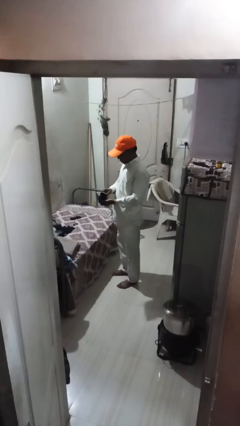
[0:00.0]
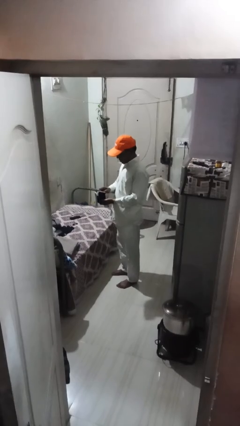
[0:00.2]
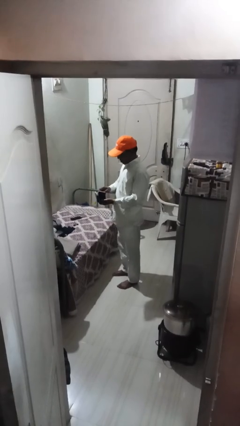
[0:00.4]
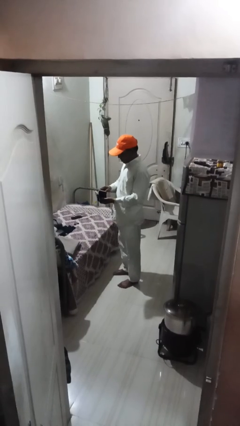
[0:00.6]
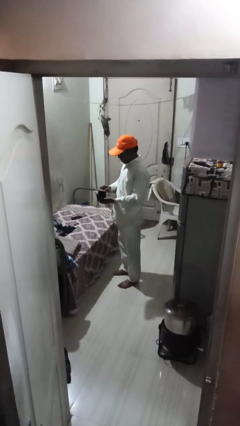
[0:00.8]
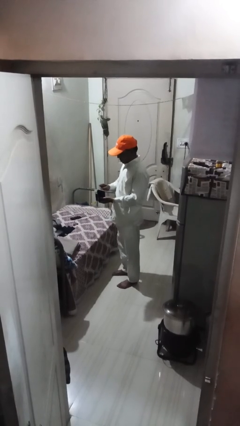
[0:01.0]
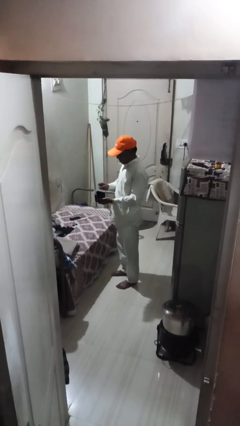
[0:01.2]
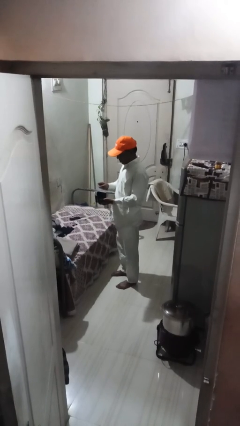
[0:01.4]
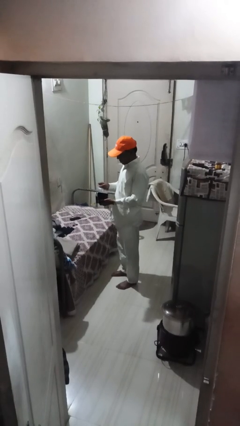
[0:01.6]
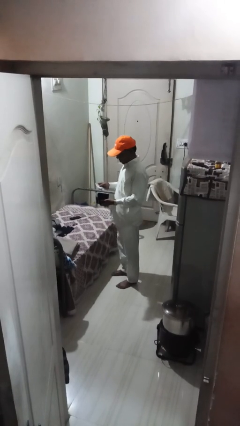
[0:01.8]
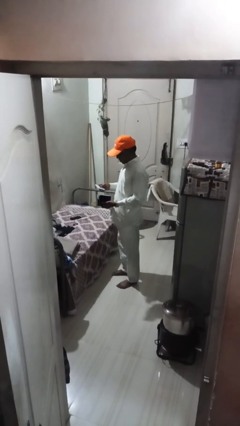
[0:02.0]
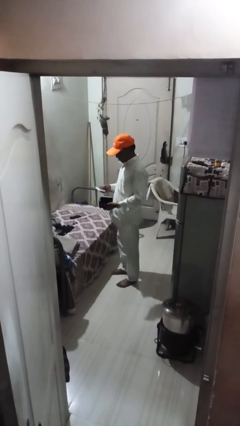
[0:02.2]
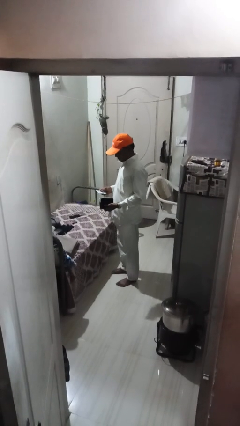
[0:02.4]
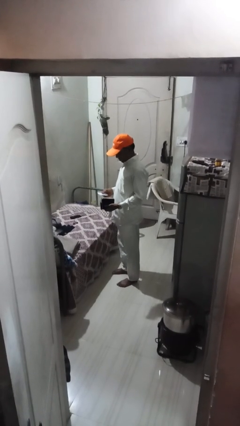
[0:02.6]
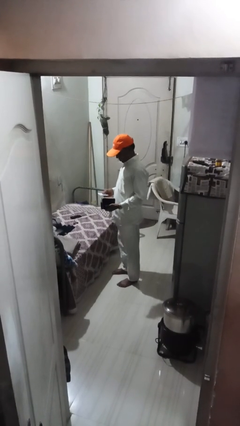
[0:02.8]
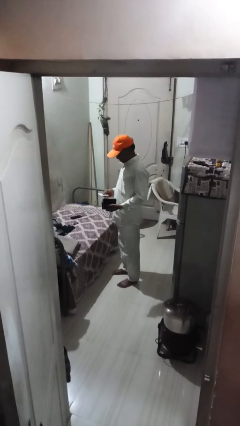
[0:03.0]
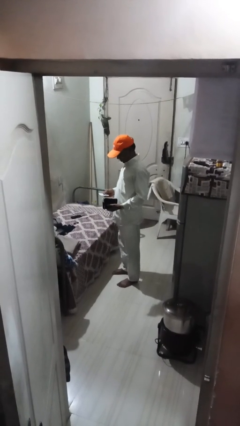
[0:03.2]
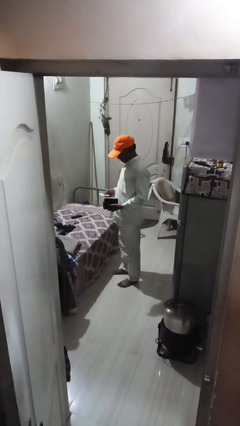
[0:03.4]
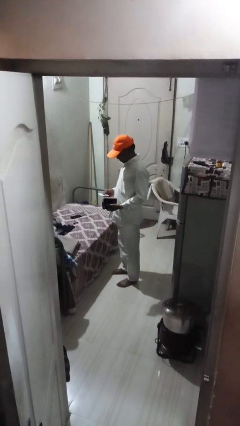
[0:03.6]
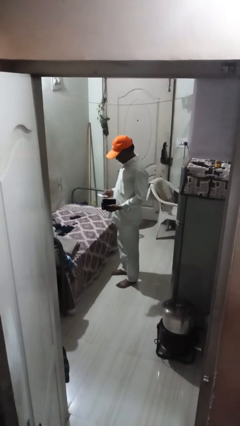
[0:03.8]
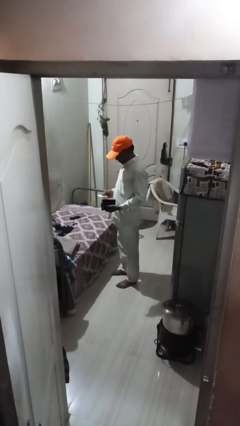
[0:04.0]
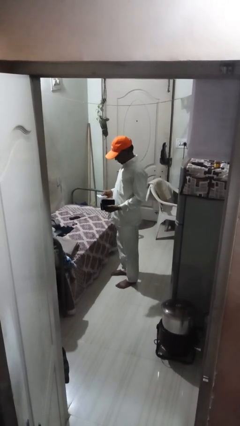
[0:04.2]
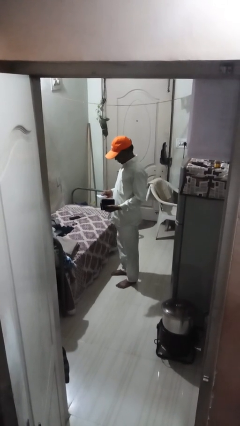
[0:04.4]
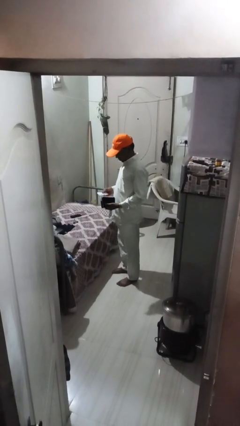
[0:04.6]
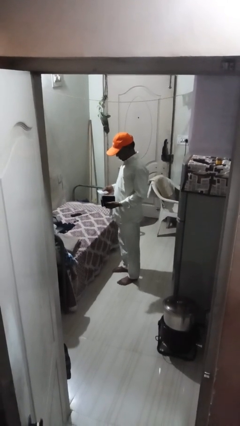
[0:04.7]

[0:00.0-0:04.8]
person takes object from purse

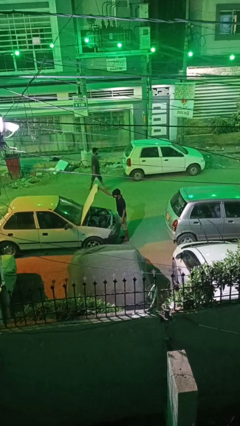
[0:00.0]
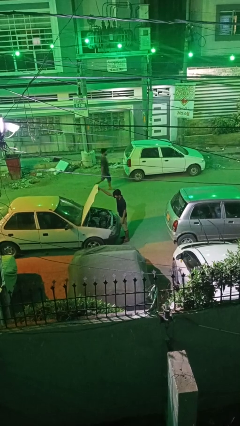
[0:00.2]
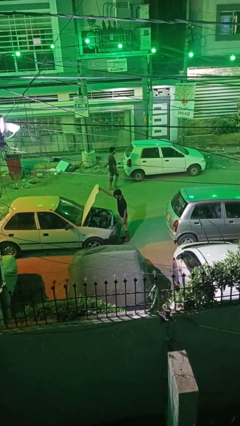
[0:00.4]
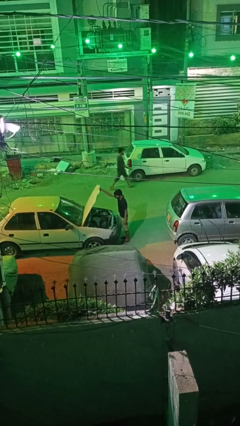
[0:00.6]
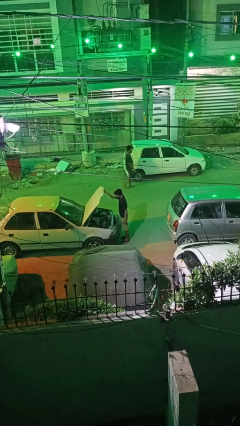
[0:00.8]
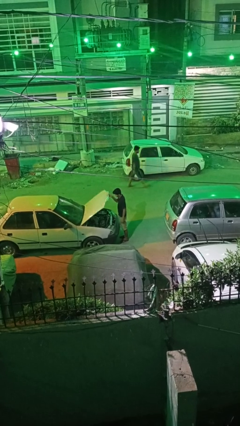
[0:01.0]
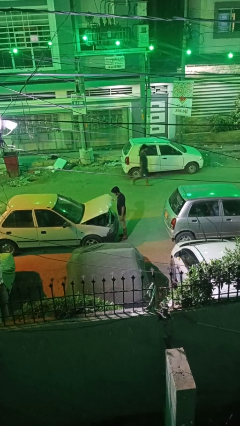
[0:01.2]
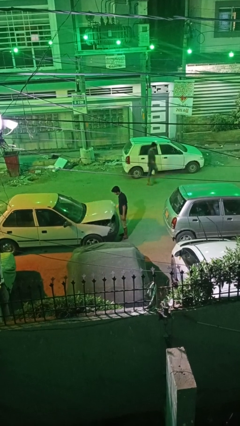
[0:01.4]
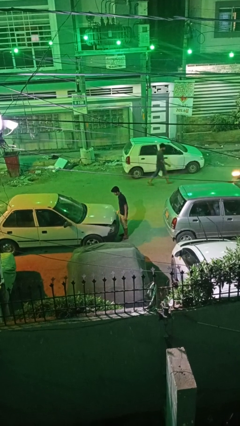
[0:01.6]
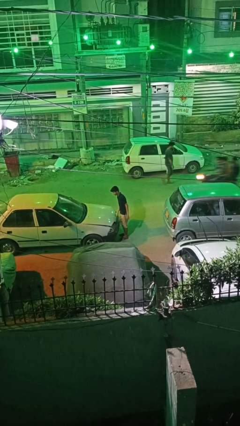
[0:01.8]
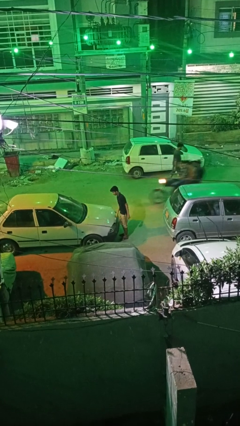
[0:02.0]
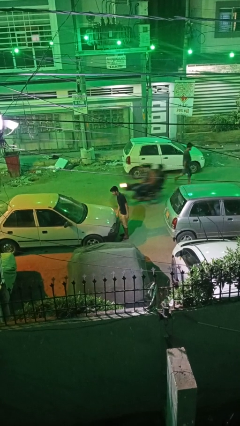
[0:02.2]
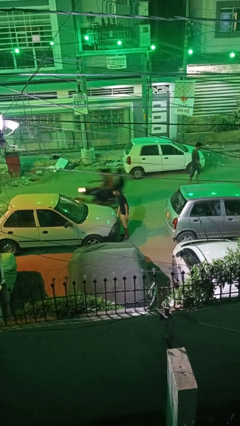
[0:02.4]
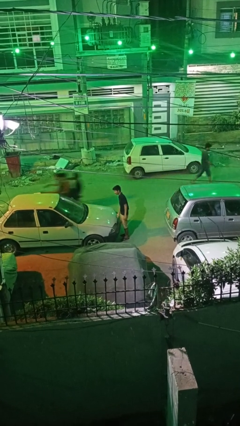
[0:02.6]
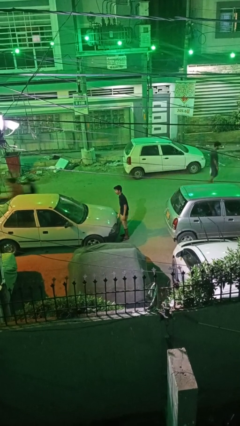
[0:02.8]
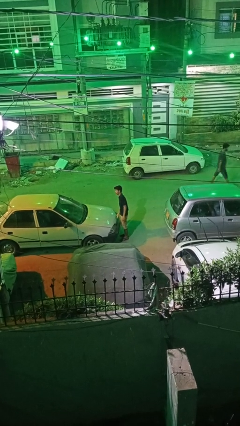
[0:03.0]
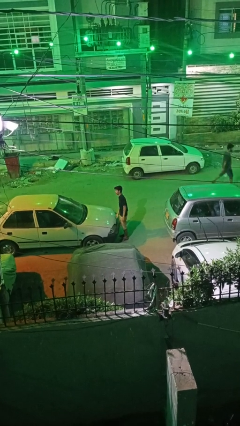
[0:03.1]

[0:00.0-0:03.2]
person closes car hood

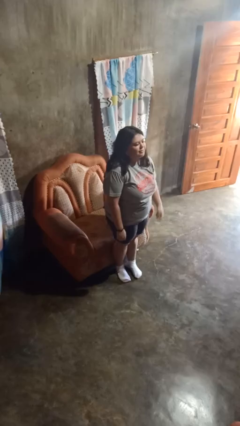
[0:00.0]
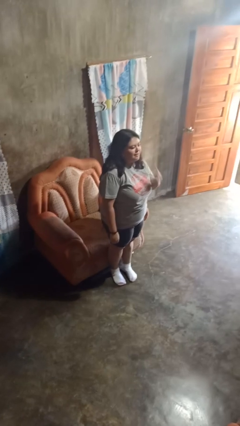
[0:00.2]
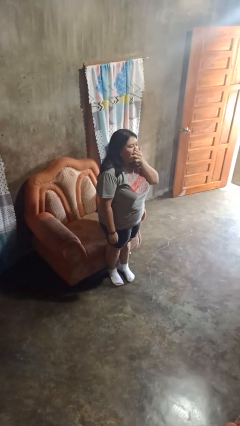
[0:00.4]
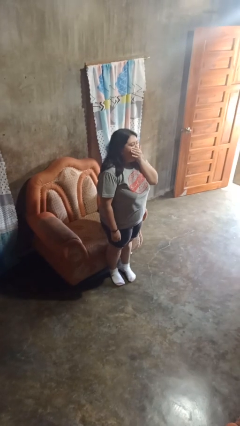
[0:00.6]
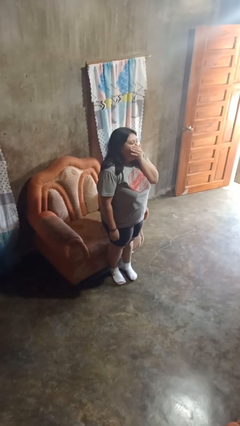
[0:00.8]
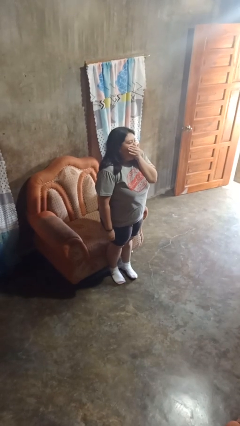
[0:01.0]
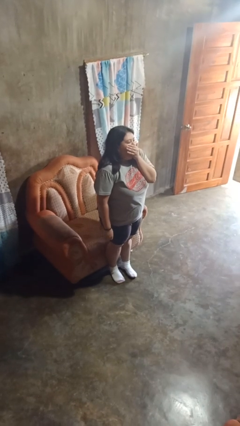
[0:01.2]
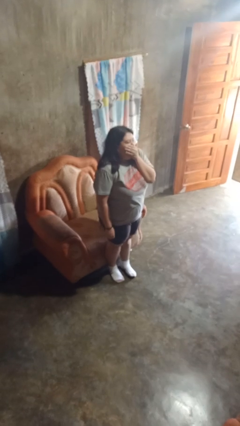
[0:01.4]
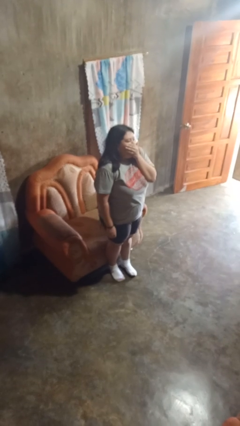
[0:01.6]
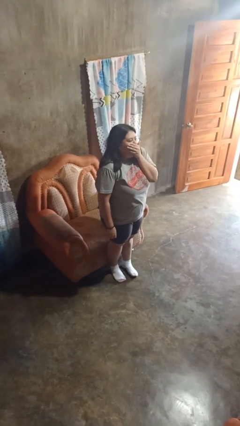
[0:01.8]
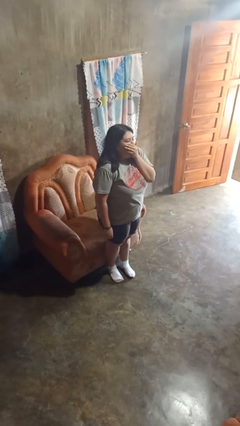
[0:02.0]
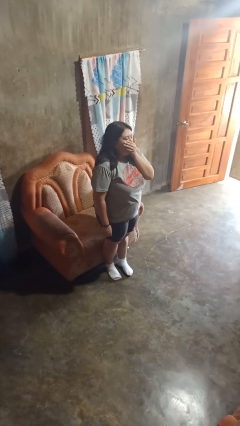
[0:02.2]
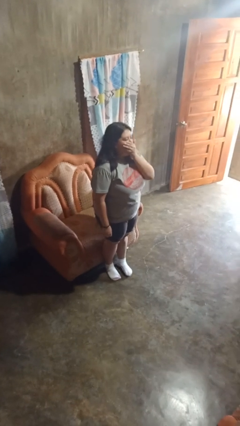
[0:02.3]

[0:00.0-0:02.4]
person yawns

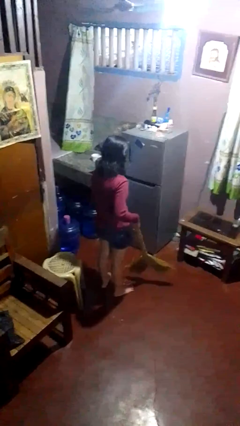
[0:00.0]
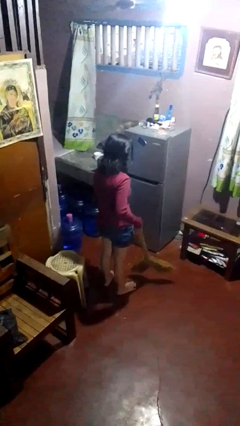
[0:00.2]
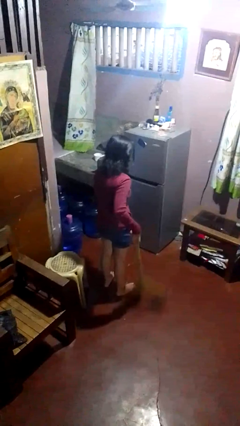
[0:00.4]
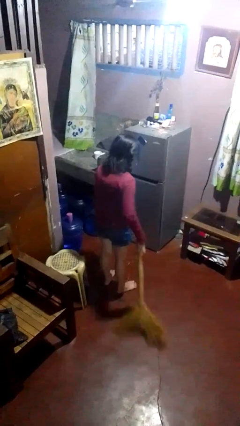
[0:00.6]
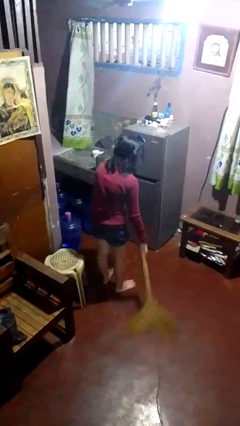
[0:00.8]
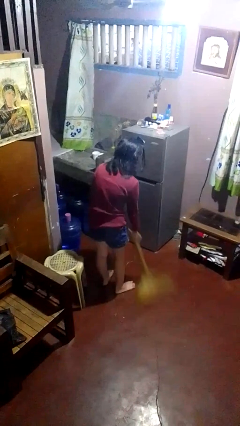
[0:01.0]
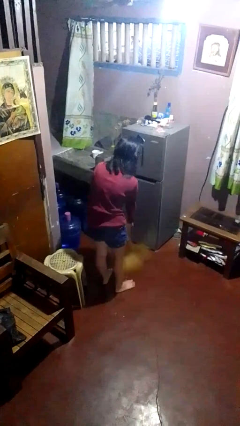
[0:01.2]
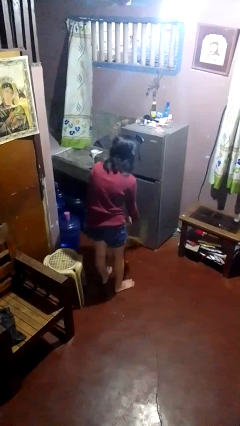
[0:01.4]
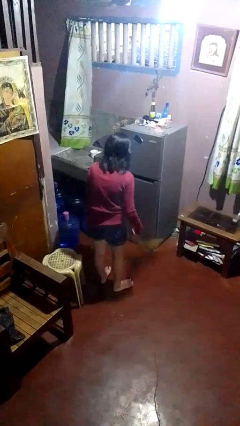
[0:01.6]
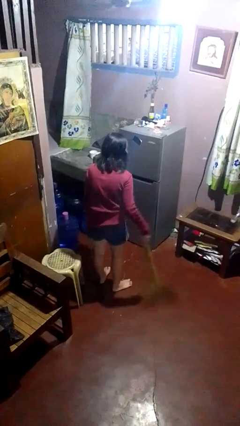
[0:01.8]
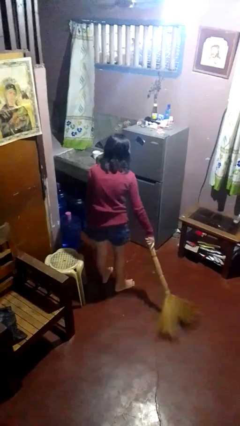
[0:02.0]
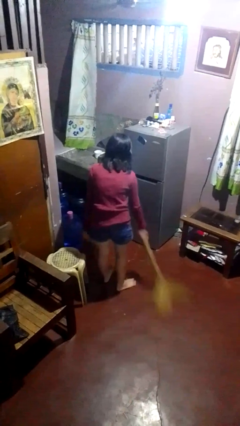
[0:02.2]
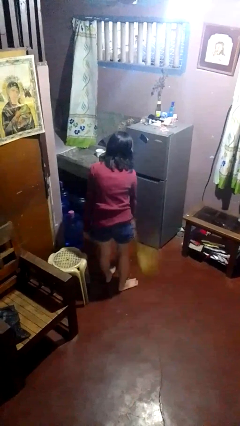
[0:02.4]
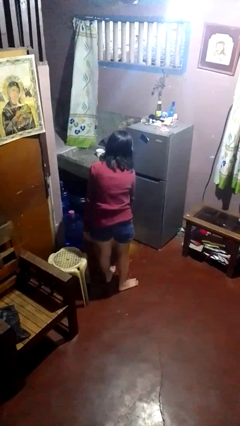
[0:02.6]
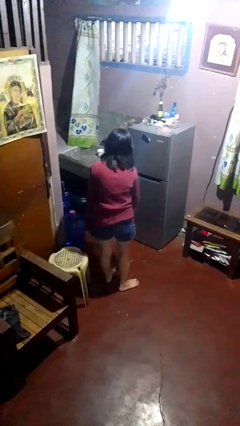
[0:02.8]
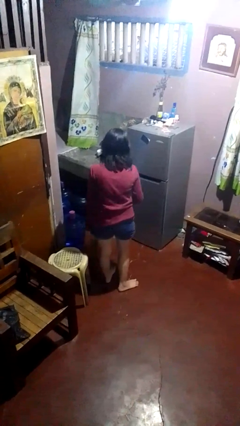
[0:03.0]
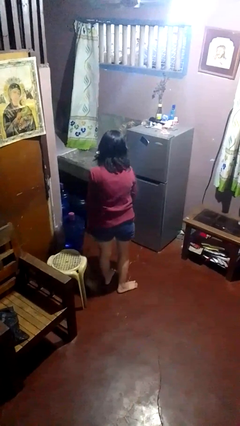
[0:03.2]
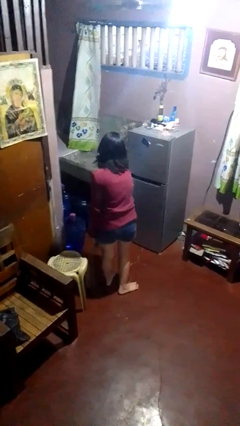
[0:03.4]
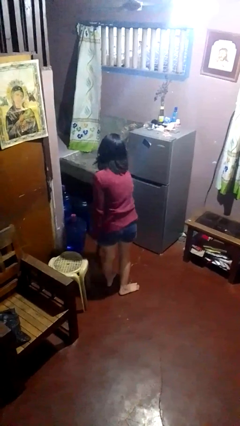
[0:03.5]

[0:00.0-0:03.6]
person sweeps floor

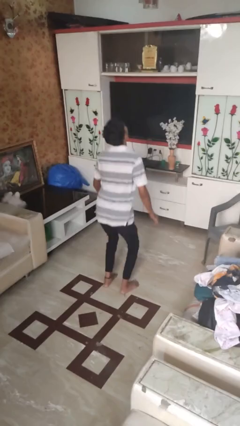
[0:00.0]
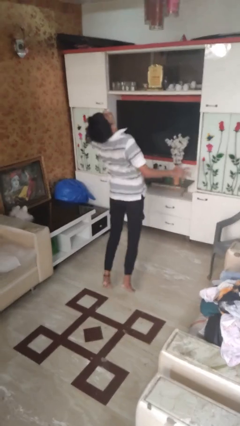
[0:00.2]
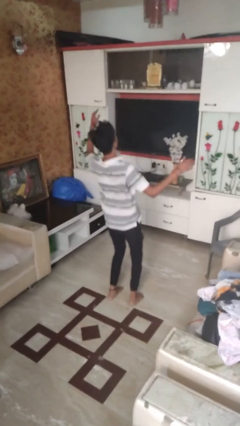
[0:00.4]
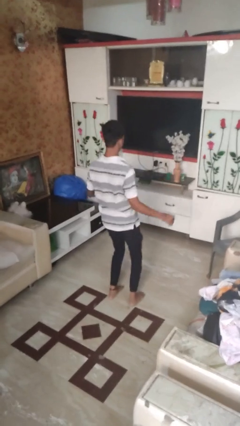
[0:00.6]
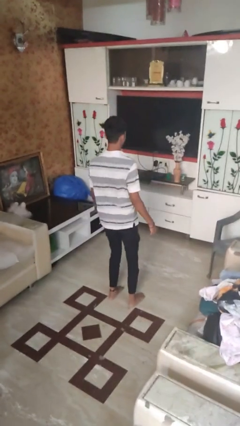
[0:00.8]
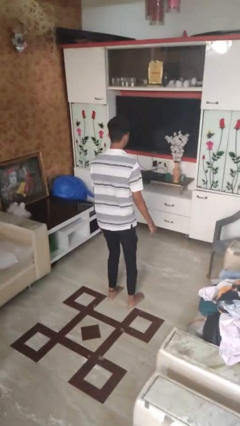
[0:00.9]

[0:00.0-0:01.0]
person somersaults

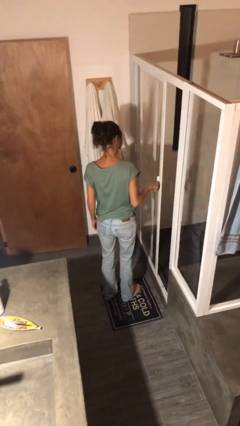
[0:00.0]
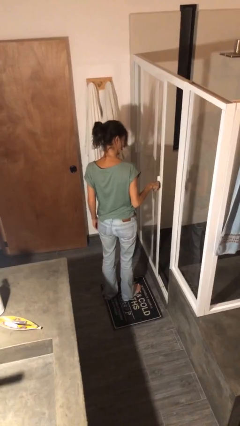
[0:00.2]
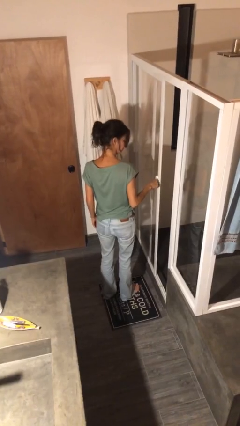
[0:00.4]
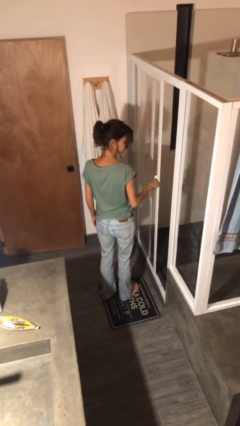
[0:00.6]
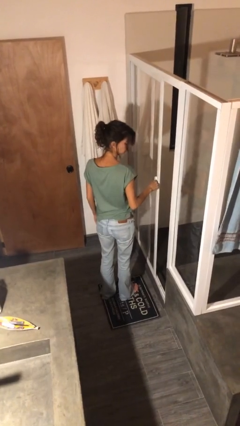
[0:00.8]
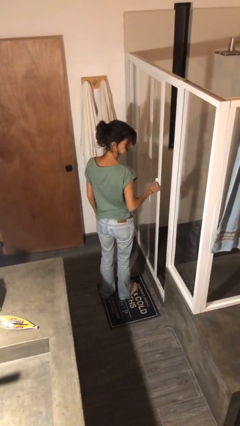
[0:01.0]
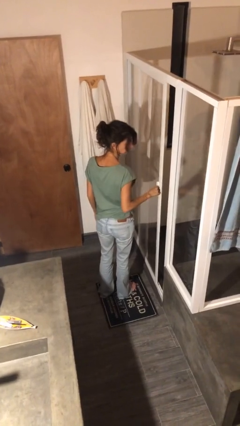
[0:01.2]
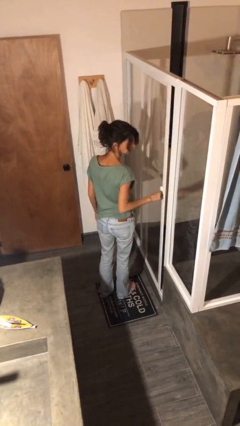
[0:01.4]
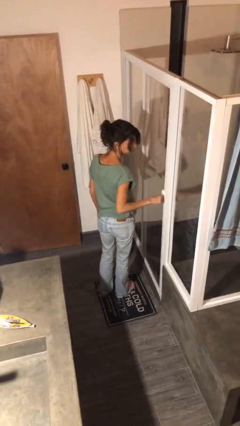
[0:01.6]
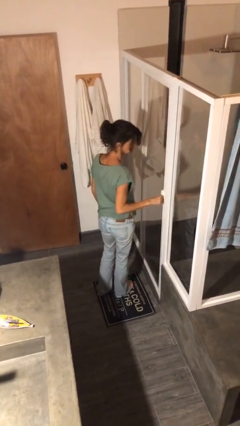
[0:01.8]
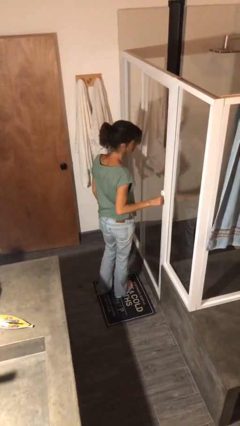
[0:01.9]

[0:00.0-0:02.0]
person closes sliding door

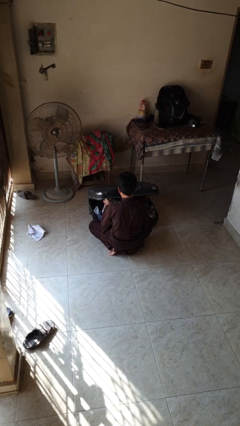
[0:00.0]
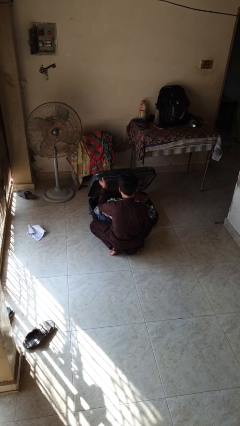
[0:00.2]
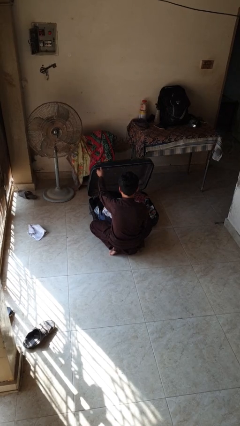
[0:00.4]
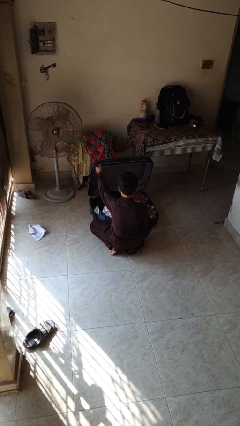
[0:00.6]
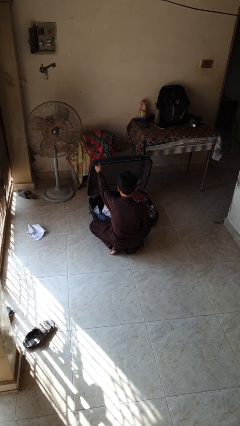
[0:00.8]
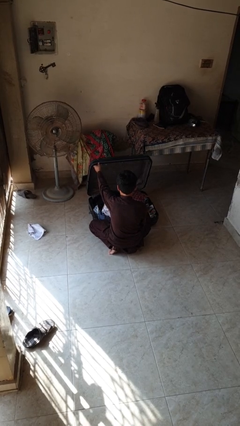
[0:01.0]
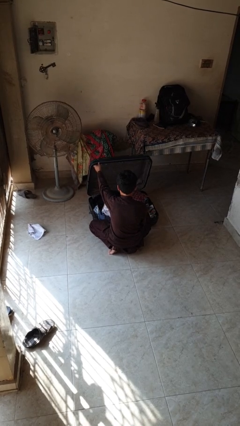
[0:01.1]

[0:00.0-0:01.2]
person opens suitcase
